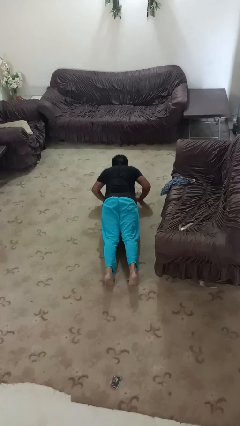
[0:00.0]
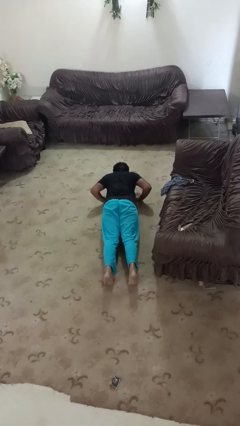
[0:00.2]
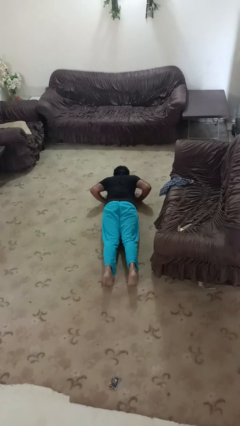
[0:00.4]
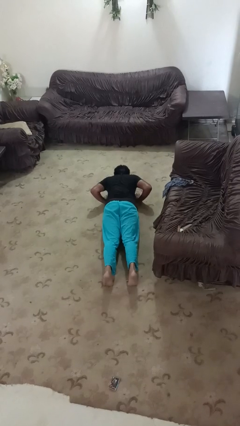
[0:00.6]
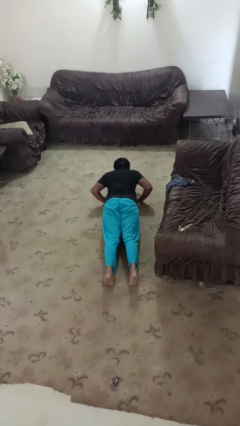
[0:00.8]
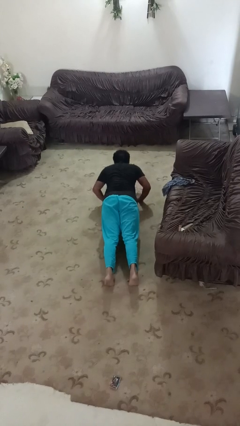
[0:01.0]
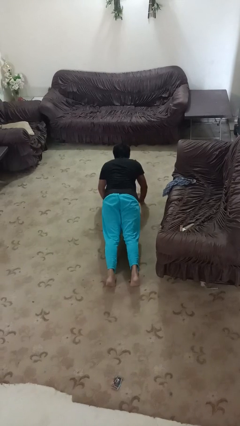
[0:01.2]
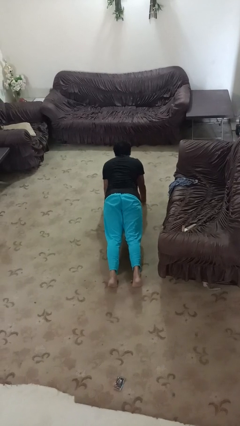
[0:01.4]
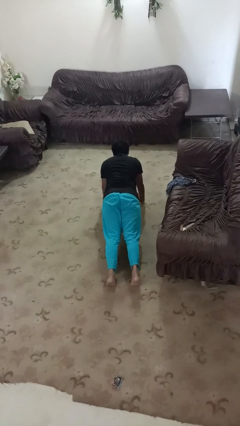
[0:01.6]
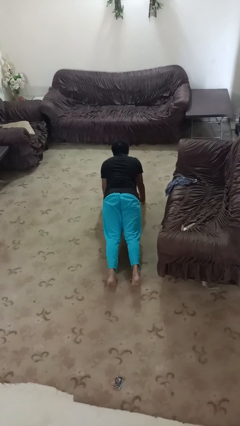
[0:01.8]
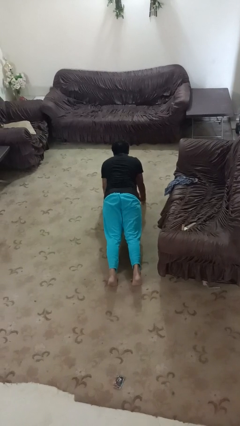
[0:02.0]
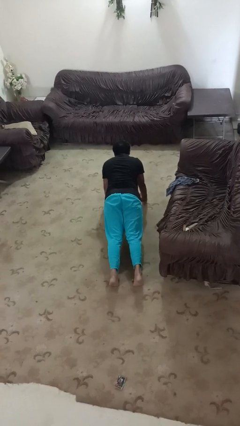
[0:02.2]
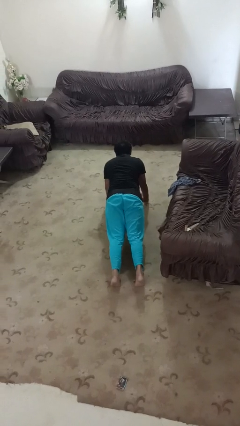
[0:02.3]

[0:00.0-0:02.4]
person exercises with pushup

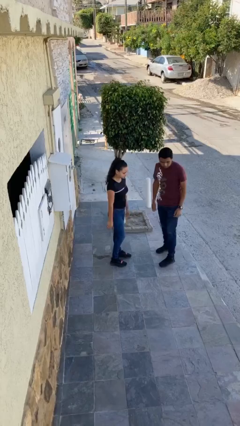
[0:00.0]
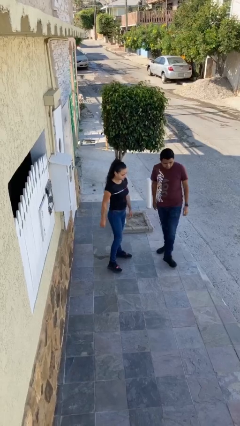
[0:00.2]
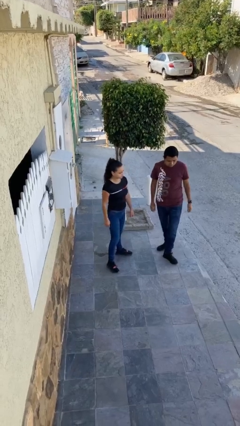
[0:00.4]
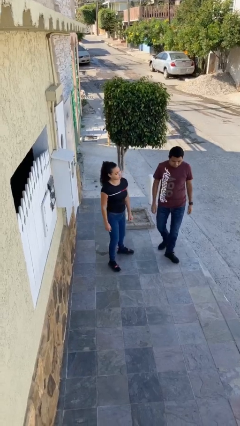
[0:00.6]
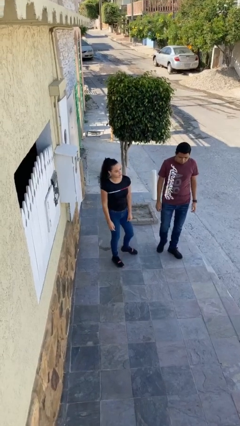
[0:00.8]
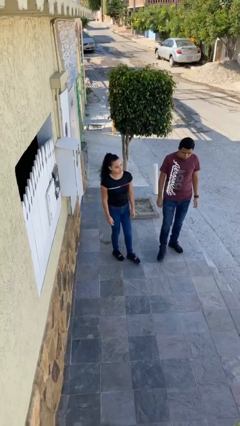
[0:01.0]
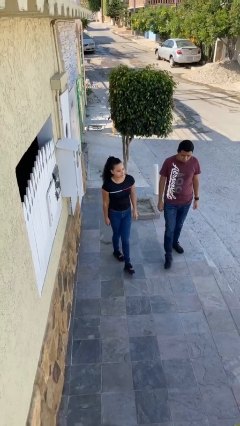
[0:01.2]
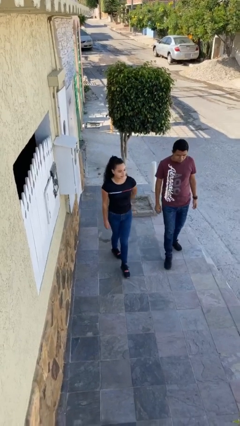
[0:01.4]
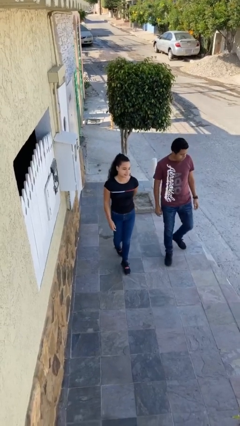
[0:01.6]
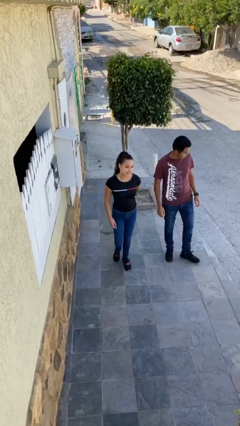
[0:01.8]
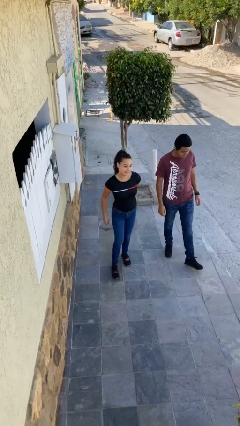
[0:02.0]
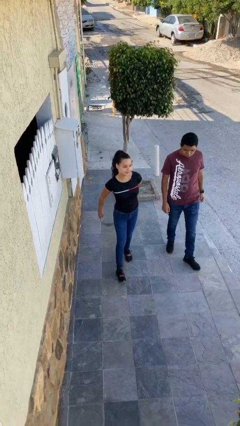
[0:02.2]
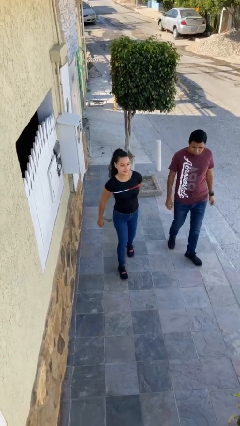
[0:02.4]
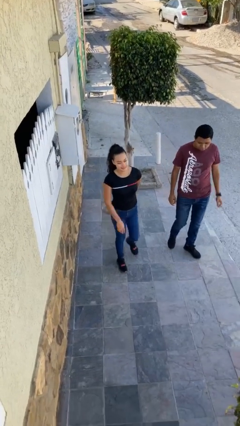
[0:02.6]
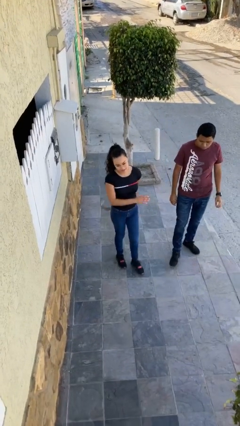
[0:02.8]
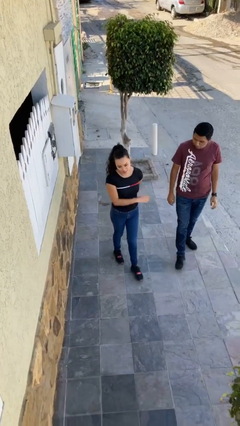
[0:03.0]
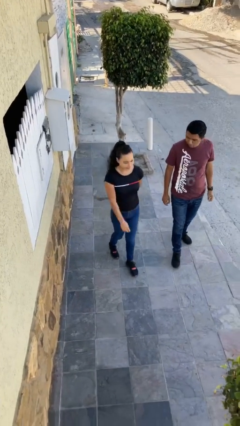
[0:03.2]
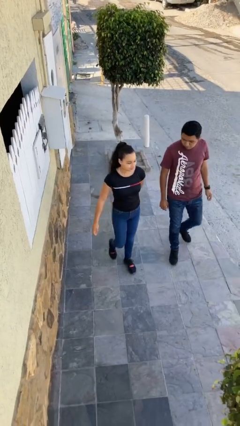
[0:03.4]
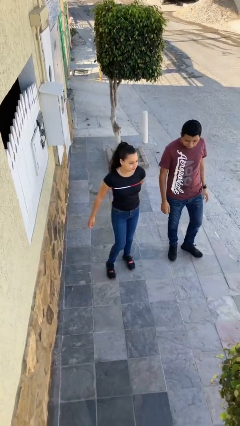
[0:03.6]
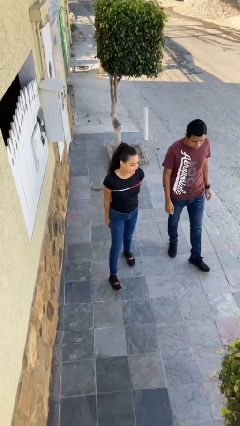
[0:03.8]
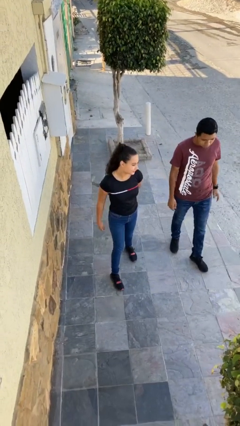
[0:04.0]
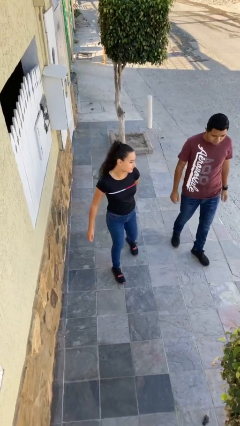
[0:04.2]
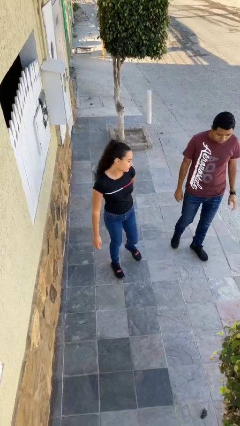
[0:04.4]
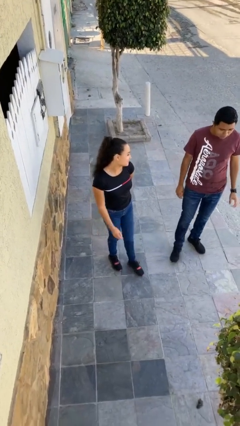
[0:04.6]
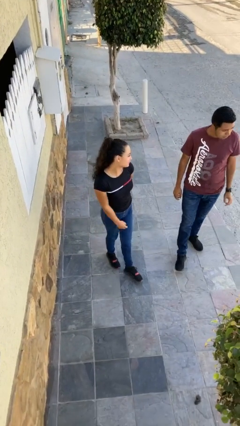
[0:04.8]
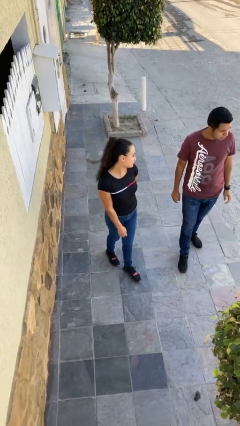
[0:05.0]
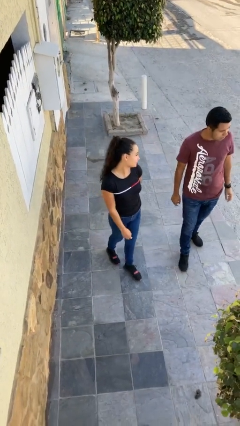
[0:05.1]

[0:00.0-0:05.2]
person talks to person

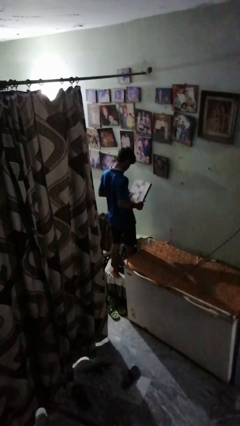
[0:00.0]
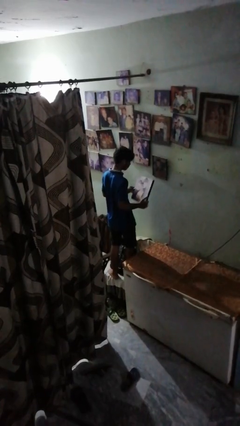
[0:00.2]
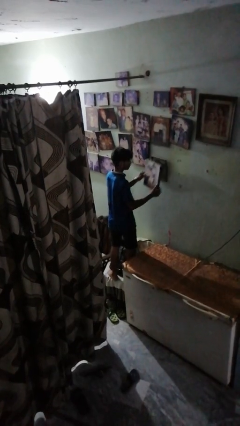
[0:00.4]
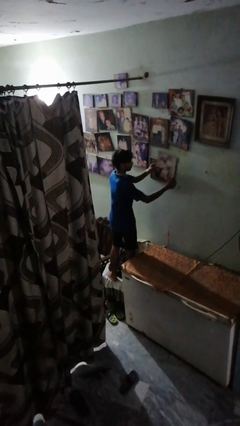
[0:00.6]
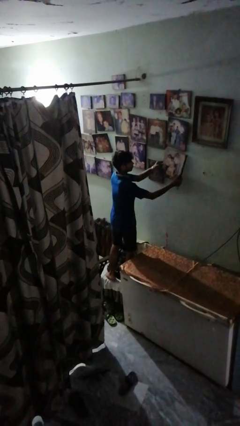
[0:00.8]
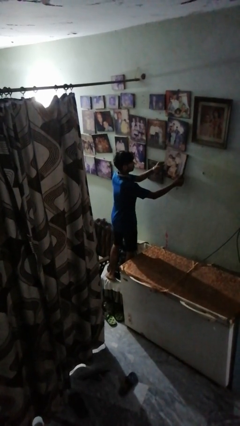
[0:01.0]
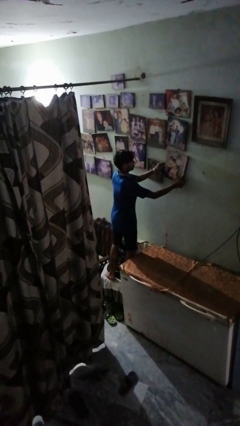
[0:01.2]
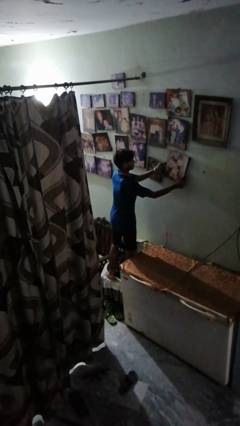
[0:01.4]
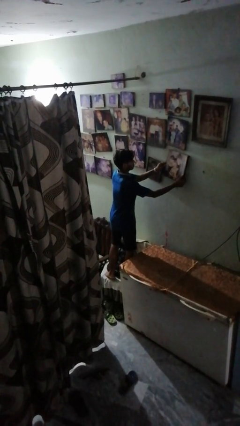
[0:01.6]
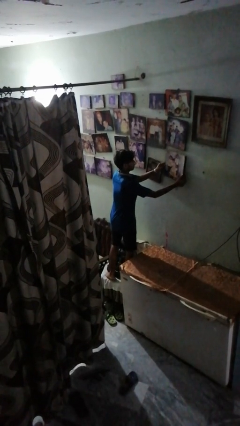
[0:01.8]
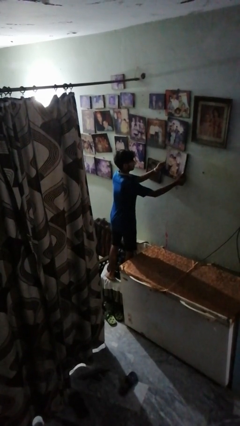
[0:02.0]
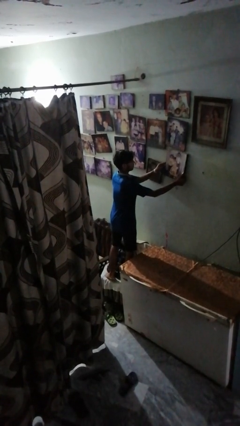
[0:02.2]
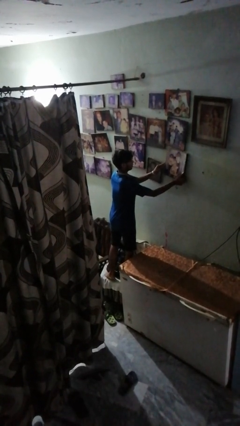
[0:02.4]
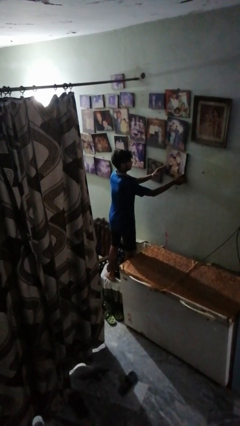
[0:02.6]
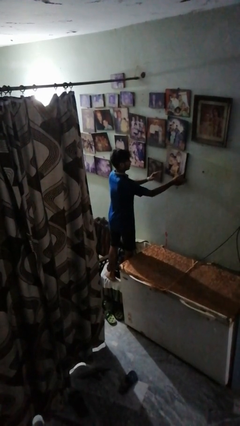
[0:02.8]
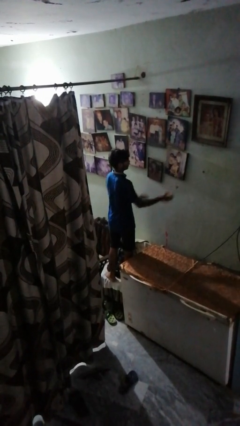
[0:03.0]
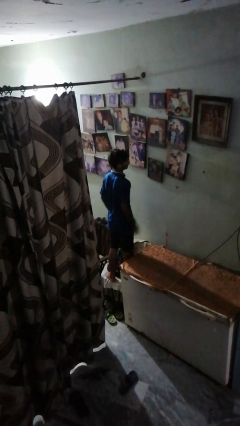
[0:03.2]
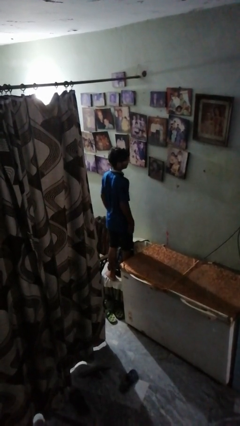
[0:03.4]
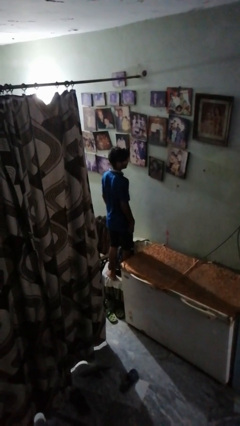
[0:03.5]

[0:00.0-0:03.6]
person puts up picture frame

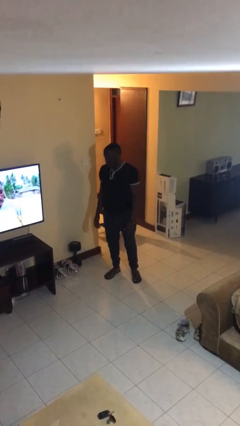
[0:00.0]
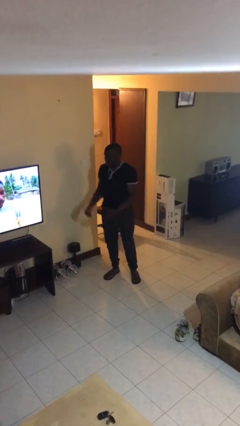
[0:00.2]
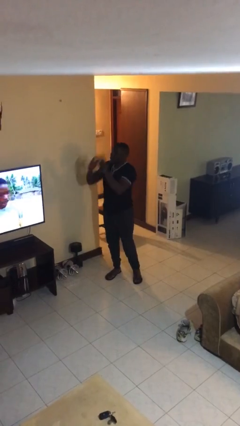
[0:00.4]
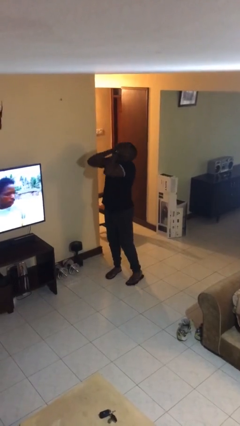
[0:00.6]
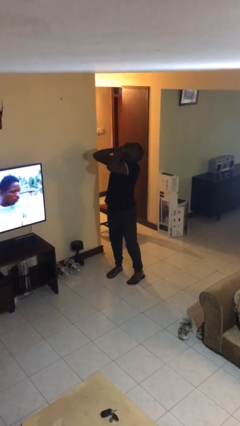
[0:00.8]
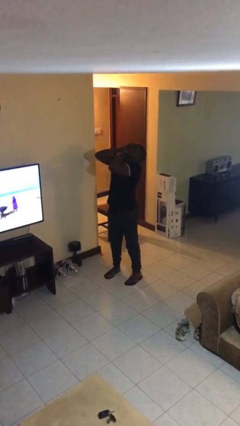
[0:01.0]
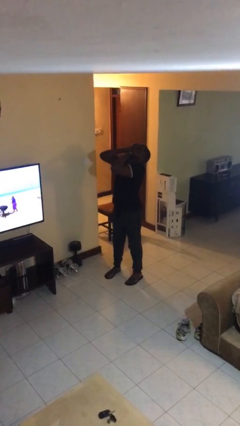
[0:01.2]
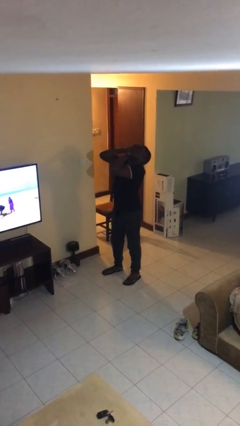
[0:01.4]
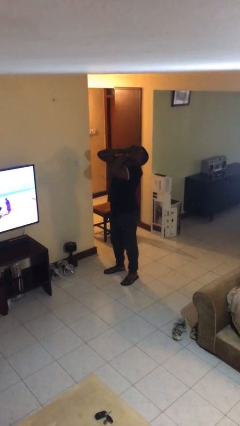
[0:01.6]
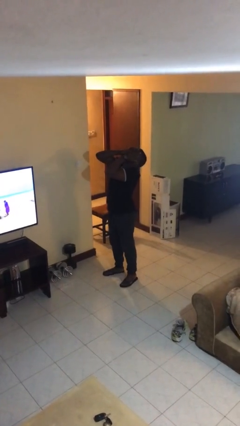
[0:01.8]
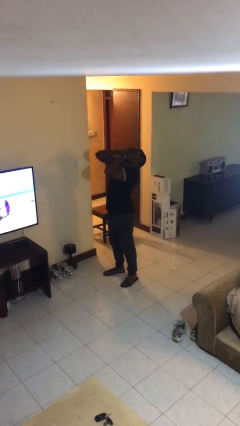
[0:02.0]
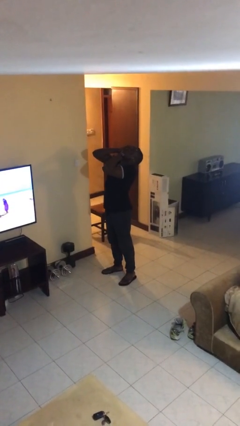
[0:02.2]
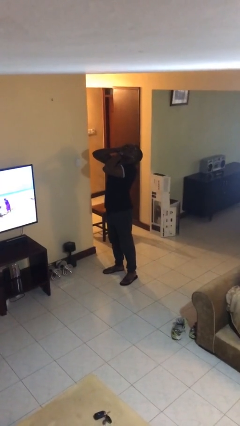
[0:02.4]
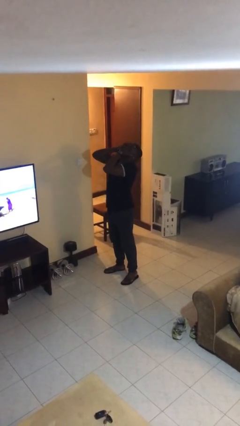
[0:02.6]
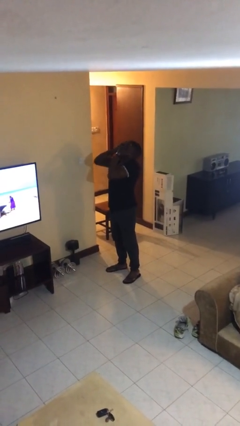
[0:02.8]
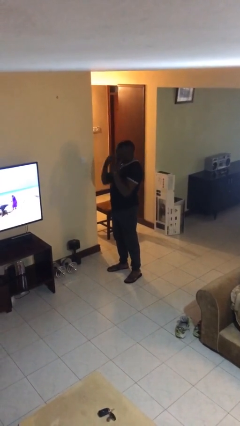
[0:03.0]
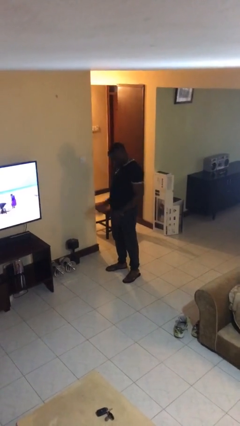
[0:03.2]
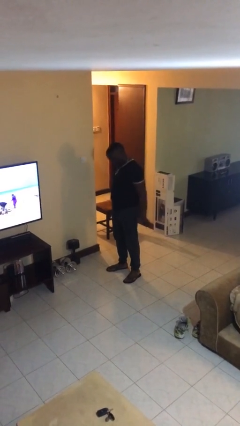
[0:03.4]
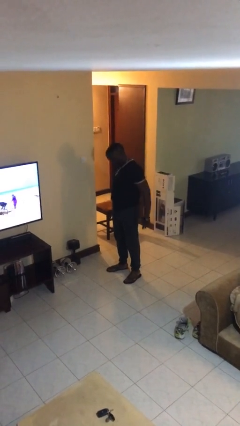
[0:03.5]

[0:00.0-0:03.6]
person covers face with hands

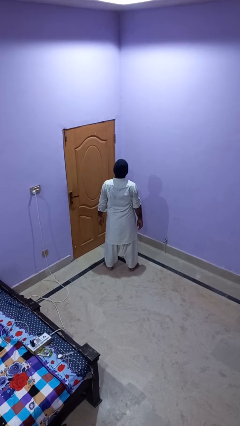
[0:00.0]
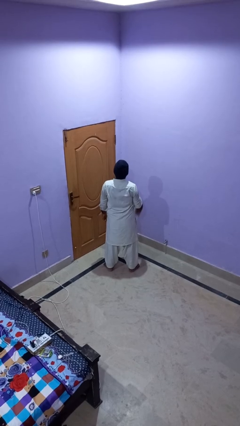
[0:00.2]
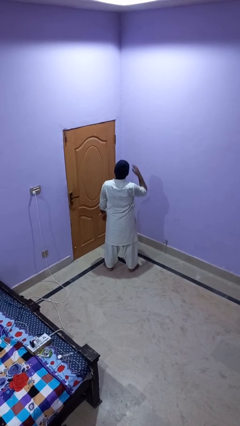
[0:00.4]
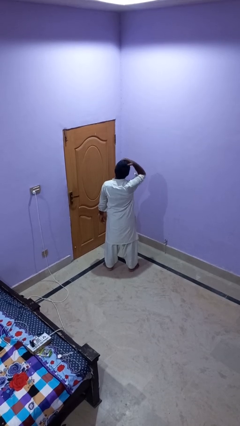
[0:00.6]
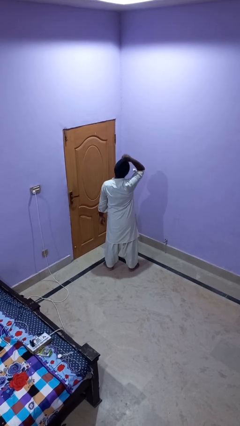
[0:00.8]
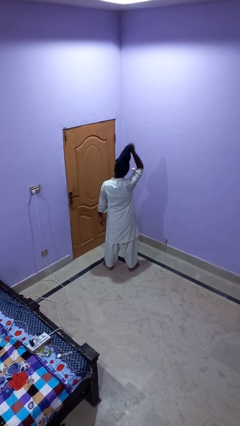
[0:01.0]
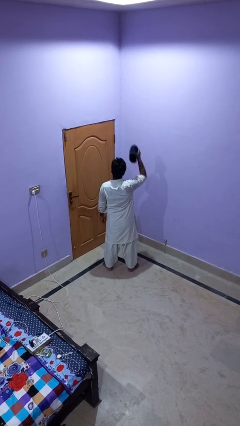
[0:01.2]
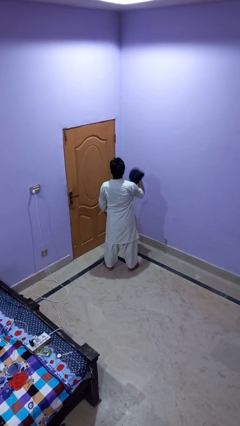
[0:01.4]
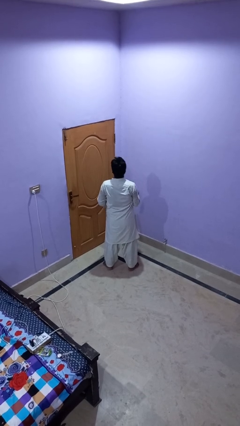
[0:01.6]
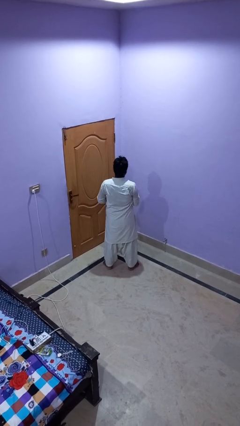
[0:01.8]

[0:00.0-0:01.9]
person takes off hat

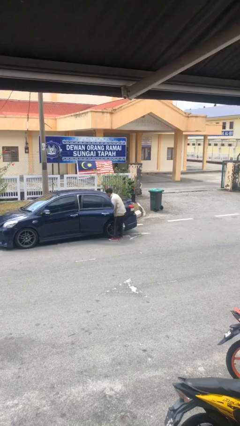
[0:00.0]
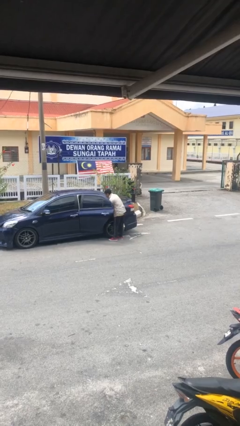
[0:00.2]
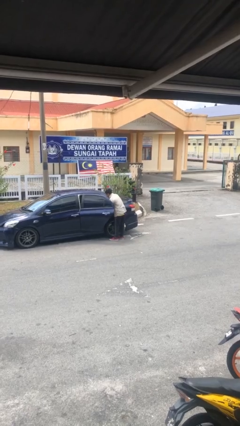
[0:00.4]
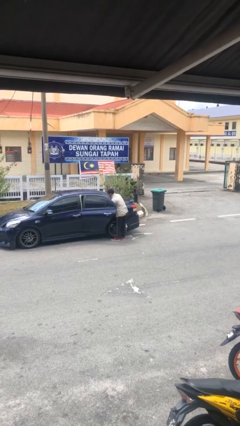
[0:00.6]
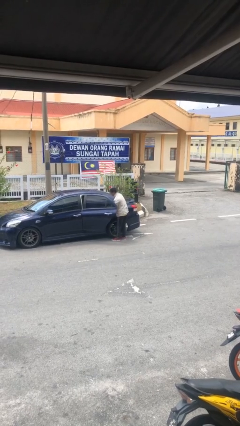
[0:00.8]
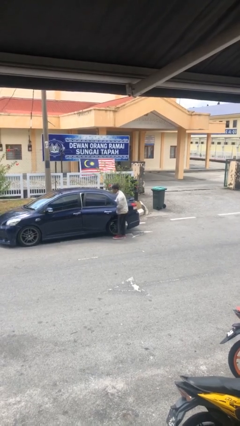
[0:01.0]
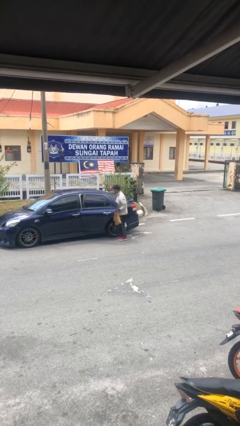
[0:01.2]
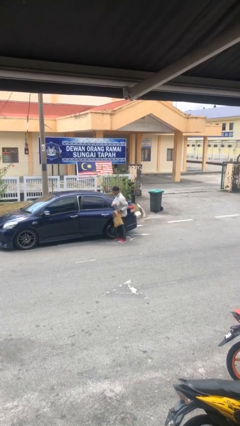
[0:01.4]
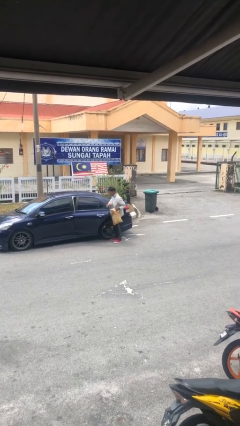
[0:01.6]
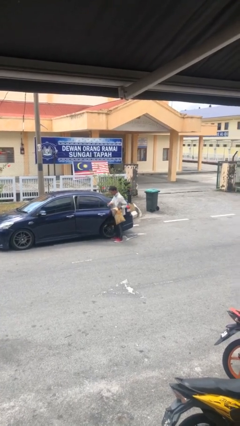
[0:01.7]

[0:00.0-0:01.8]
person unloads car
